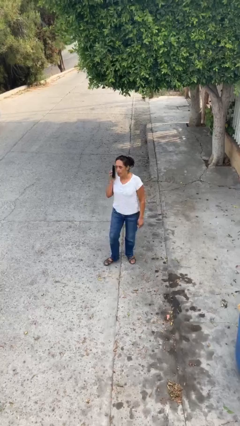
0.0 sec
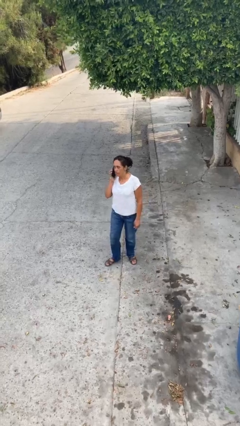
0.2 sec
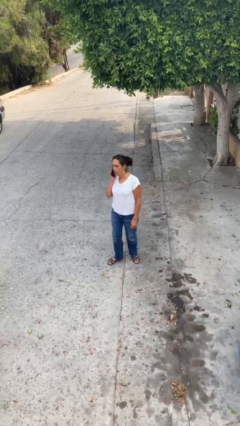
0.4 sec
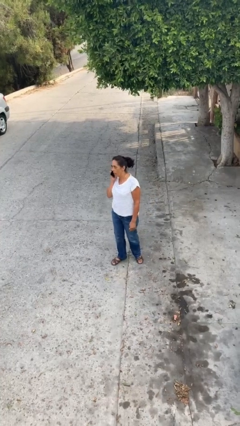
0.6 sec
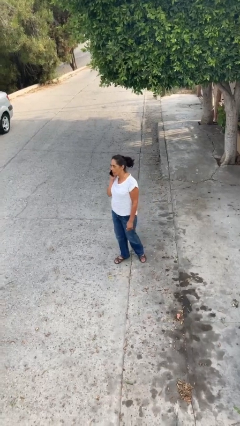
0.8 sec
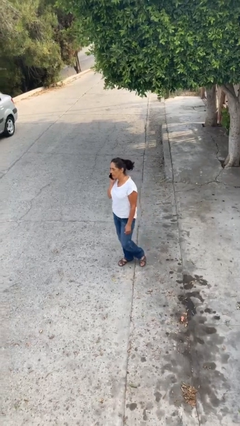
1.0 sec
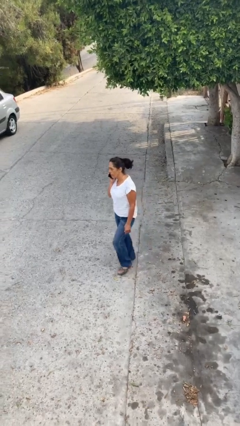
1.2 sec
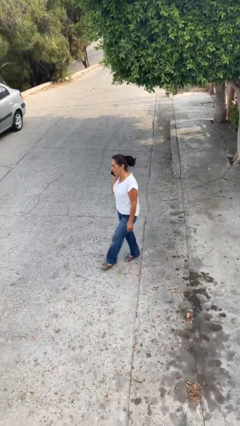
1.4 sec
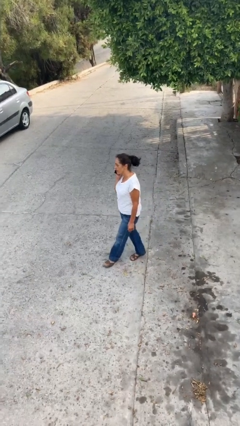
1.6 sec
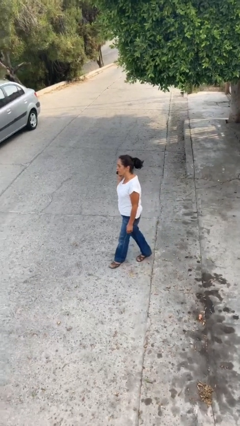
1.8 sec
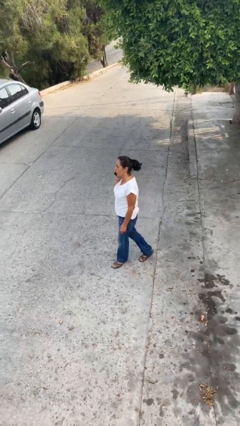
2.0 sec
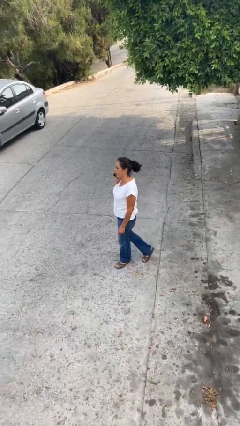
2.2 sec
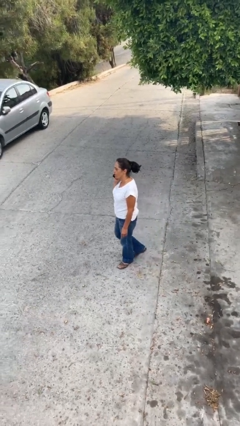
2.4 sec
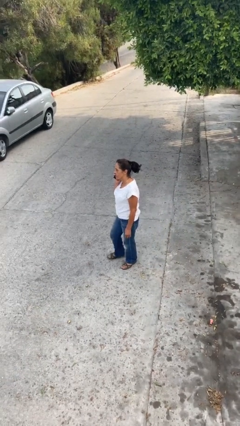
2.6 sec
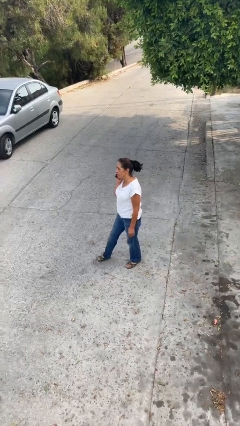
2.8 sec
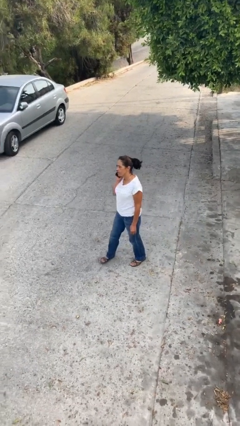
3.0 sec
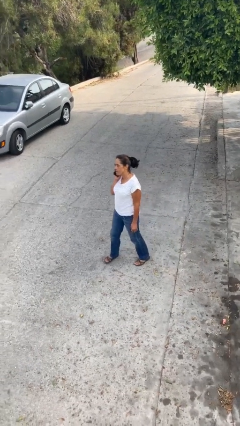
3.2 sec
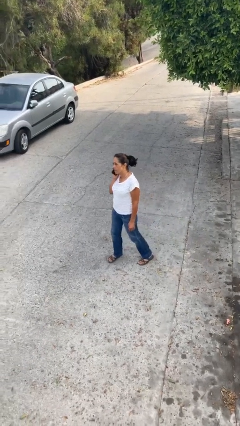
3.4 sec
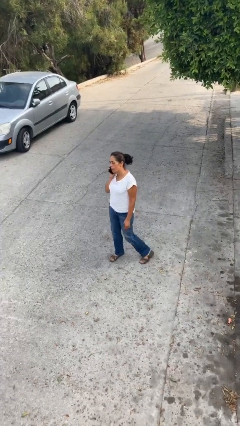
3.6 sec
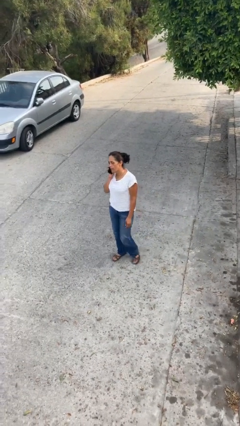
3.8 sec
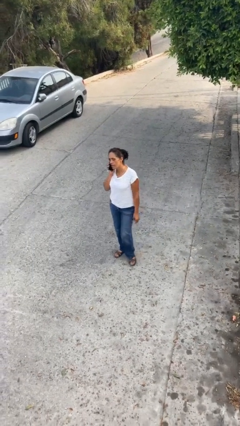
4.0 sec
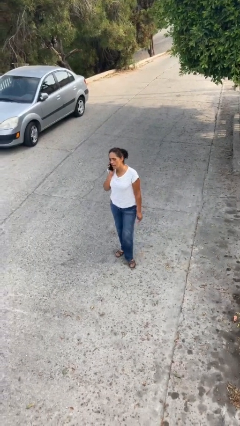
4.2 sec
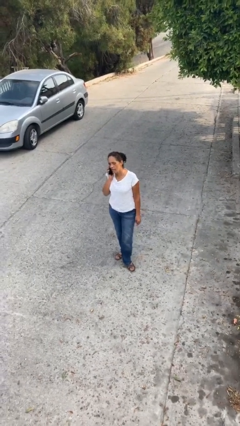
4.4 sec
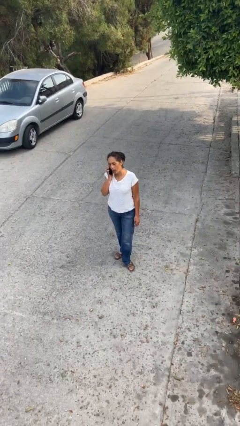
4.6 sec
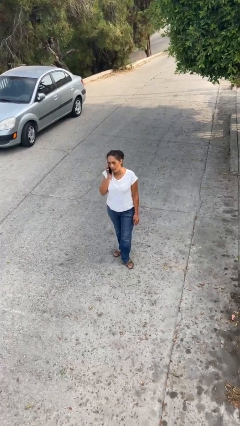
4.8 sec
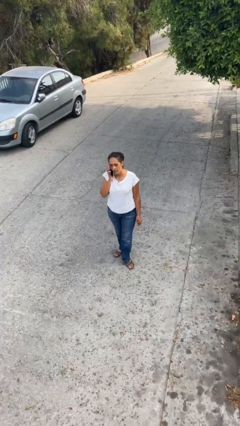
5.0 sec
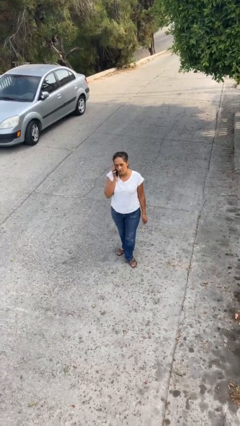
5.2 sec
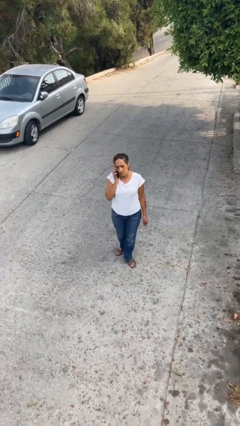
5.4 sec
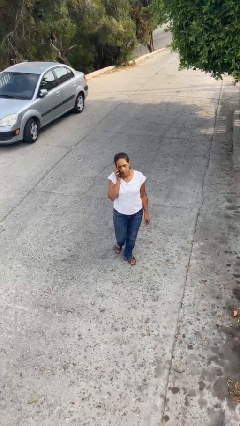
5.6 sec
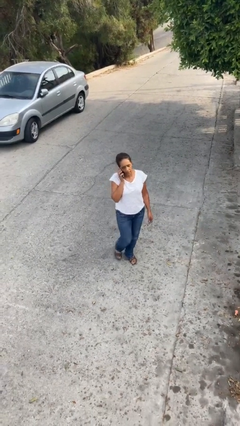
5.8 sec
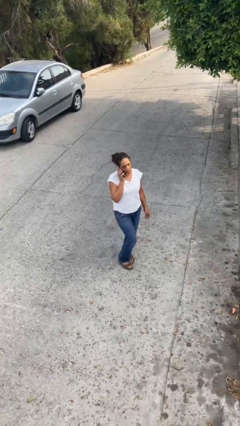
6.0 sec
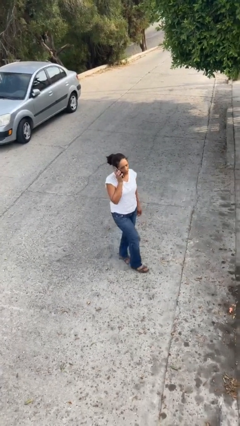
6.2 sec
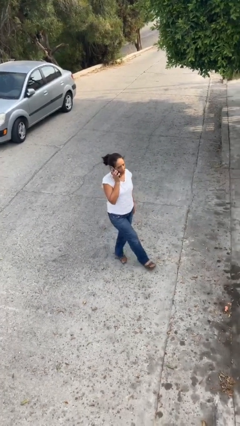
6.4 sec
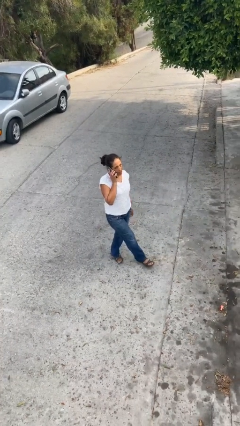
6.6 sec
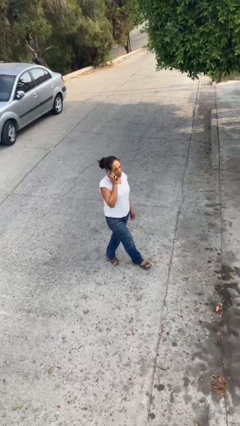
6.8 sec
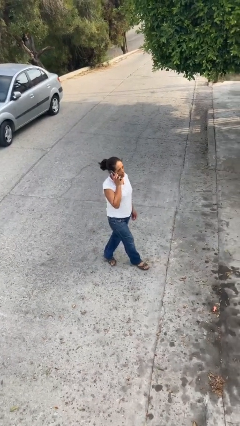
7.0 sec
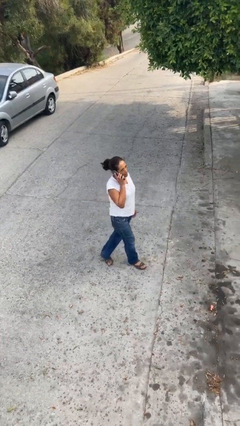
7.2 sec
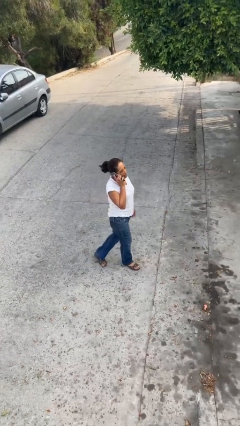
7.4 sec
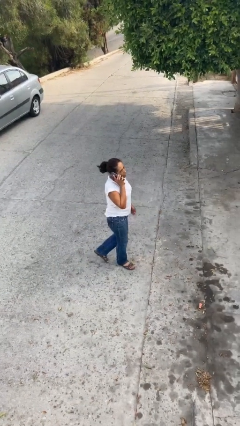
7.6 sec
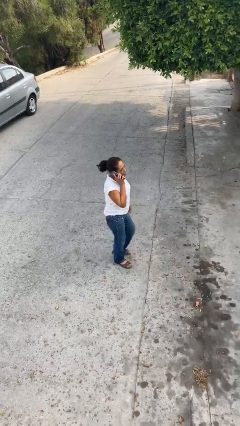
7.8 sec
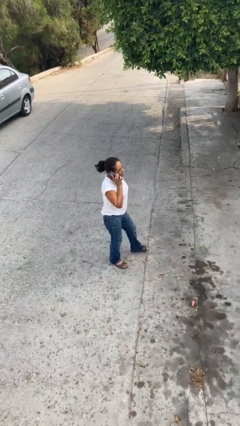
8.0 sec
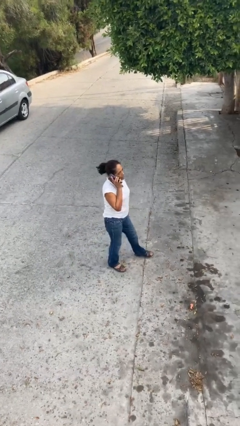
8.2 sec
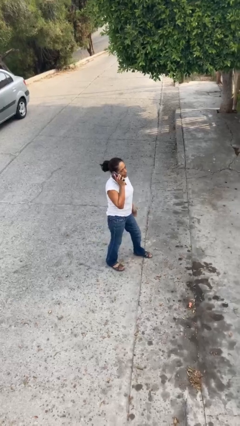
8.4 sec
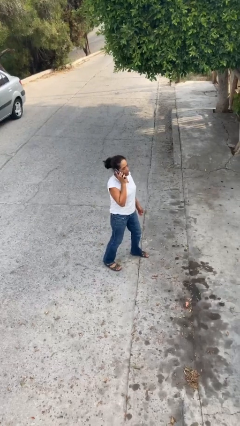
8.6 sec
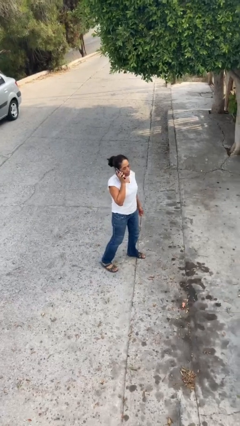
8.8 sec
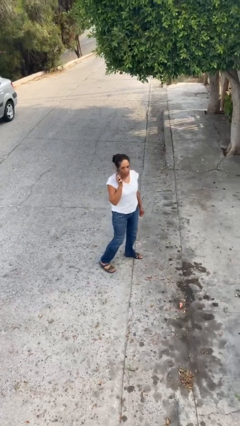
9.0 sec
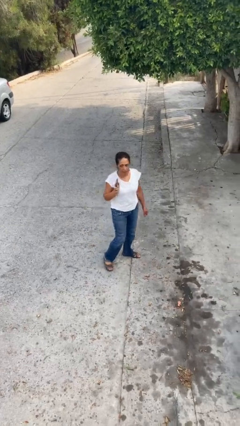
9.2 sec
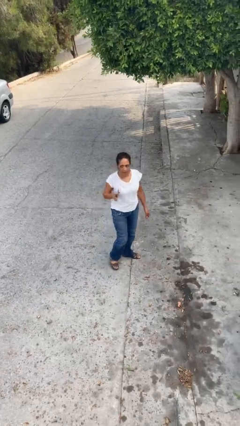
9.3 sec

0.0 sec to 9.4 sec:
person talks on phone

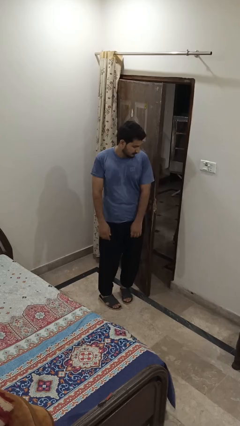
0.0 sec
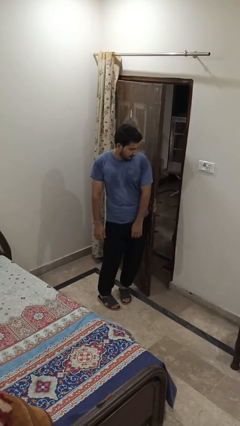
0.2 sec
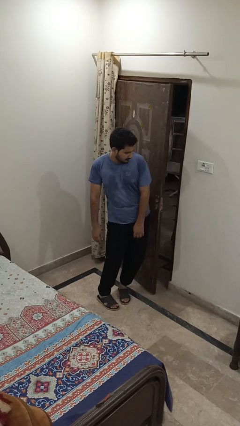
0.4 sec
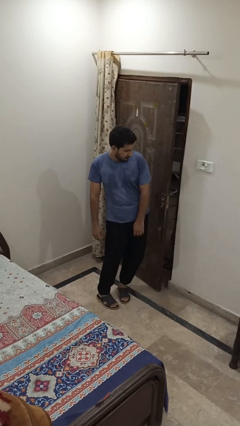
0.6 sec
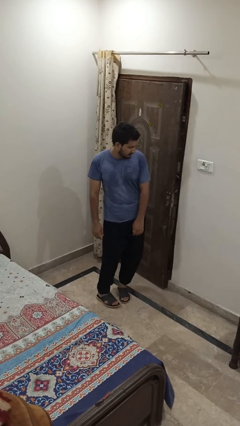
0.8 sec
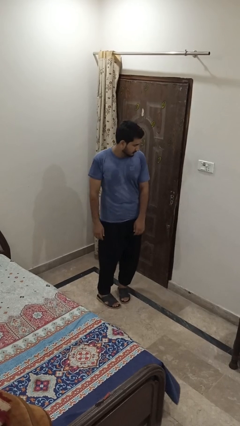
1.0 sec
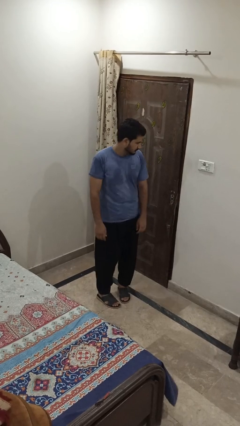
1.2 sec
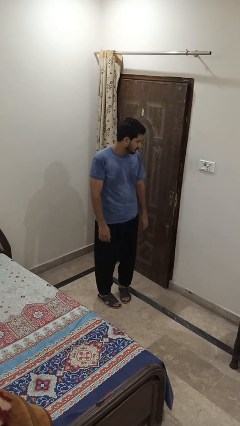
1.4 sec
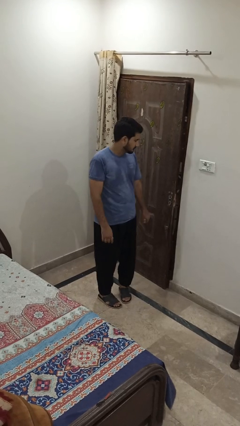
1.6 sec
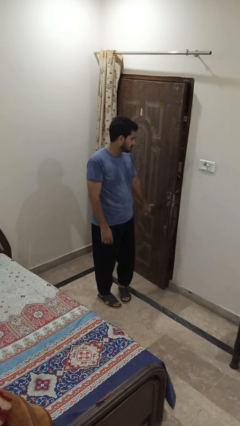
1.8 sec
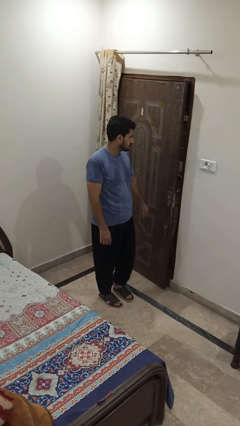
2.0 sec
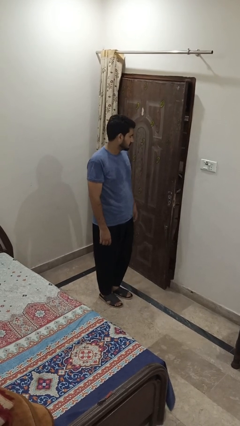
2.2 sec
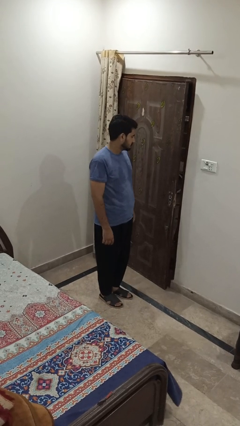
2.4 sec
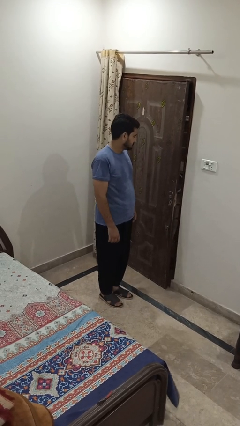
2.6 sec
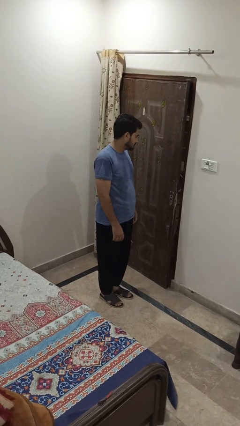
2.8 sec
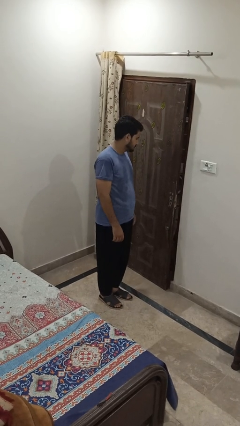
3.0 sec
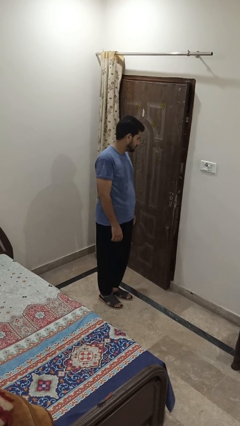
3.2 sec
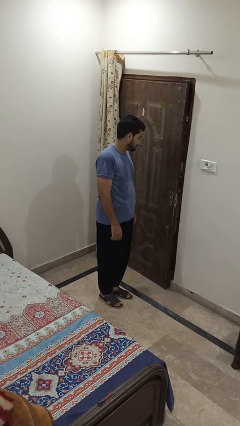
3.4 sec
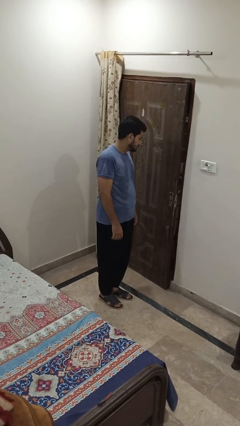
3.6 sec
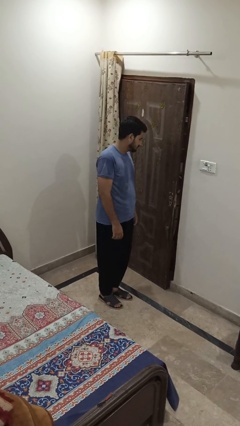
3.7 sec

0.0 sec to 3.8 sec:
person closes door with hip

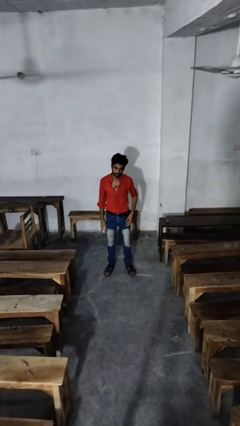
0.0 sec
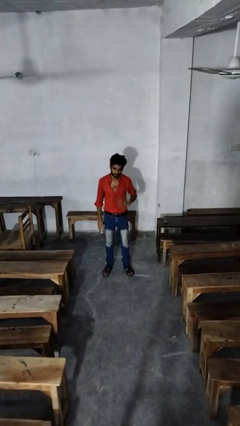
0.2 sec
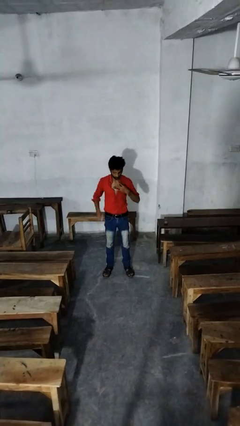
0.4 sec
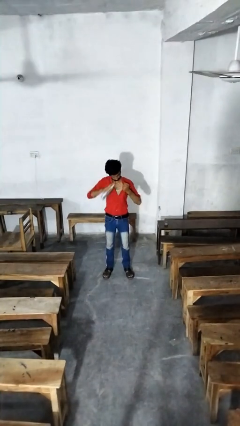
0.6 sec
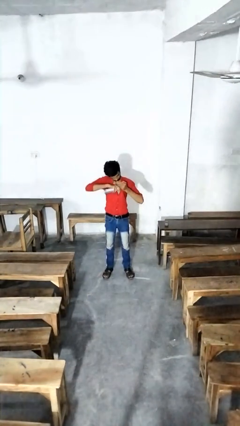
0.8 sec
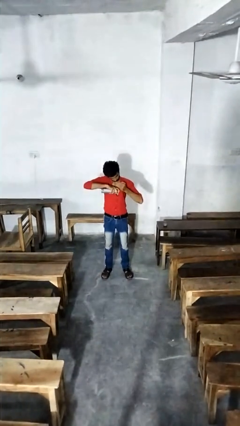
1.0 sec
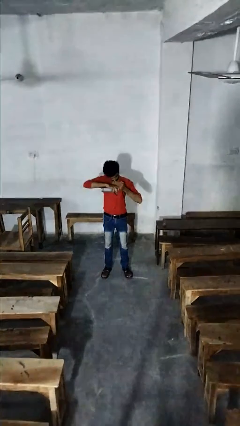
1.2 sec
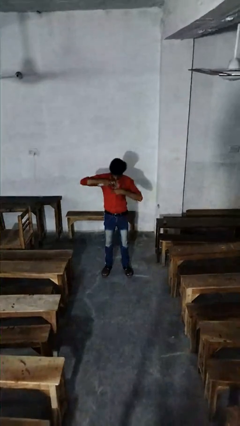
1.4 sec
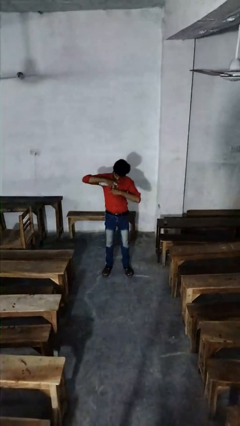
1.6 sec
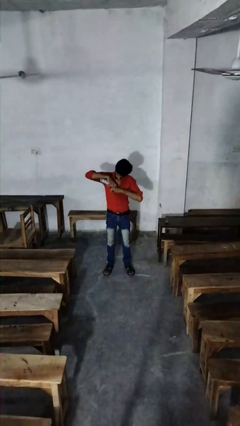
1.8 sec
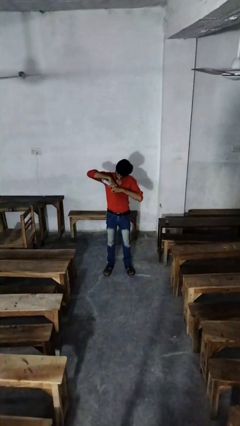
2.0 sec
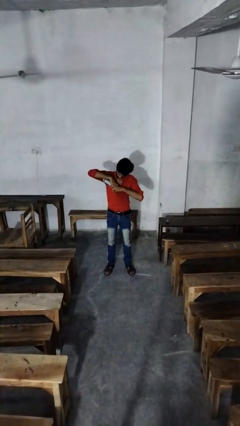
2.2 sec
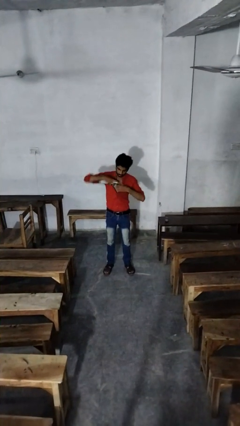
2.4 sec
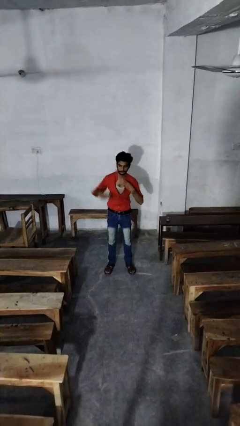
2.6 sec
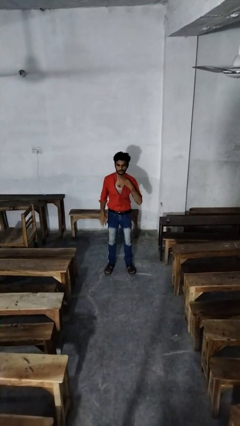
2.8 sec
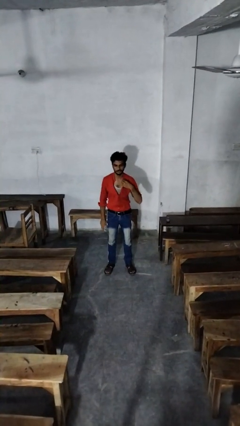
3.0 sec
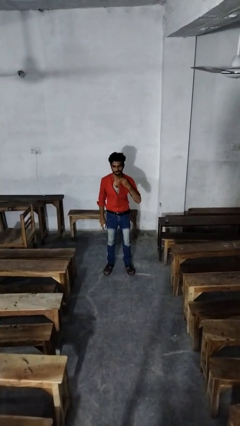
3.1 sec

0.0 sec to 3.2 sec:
person applies deodorant

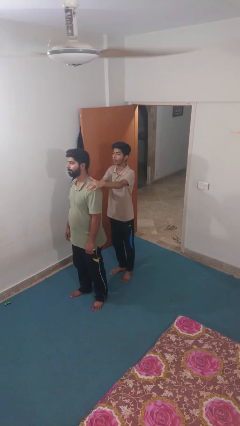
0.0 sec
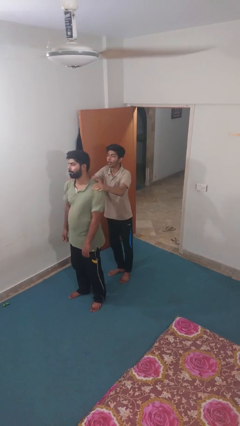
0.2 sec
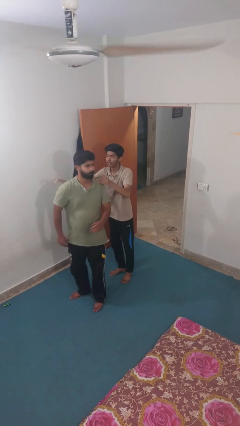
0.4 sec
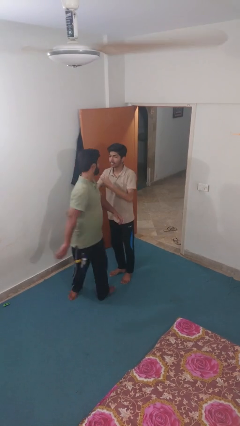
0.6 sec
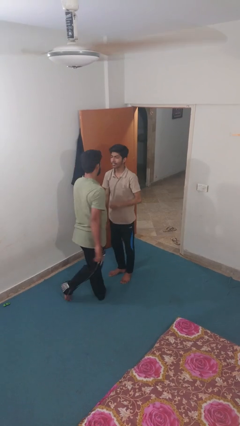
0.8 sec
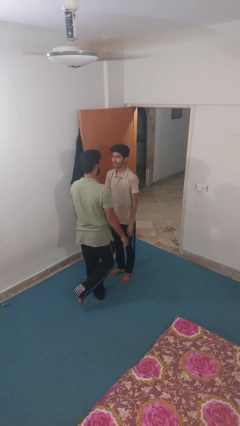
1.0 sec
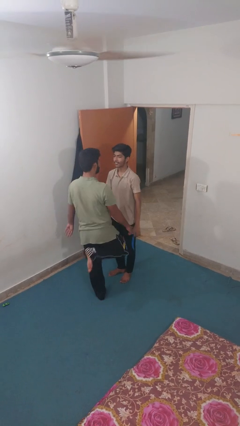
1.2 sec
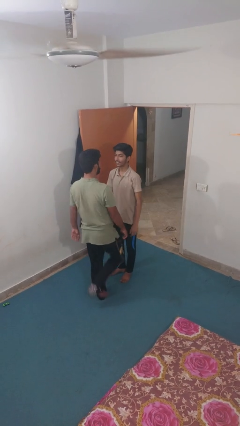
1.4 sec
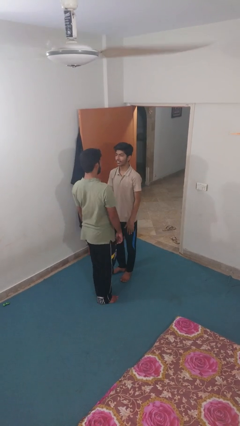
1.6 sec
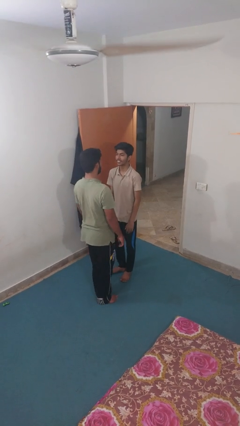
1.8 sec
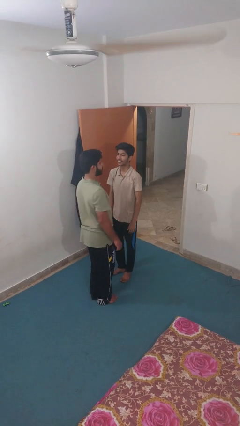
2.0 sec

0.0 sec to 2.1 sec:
person spins person around
